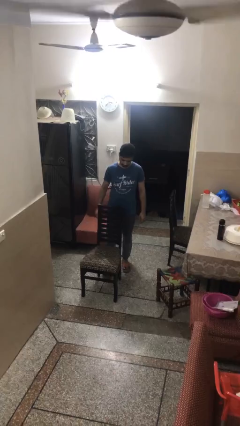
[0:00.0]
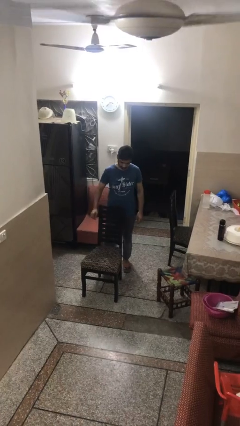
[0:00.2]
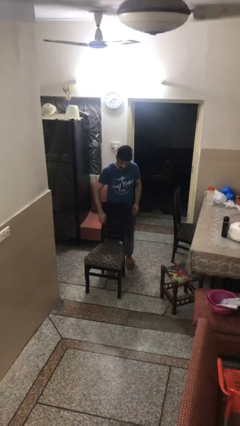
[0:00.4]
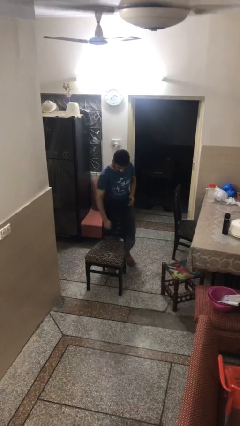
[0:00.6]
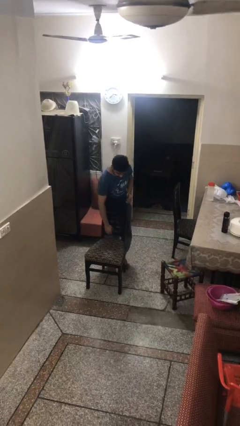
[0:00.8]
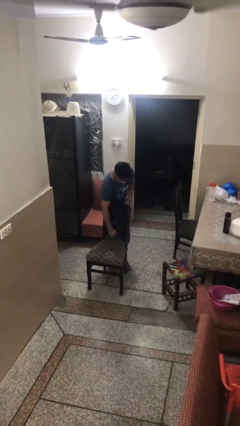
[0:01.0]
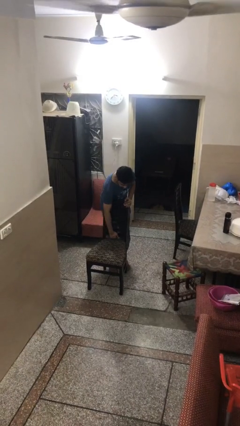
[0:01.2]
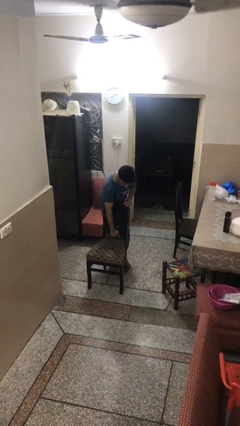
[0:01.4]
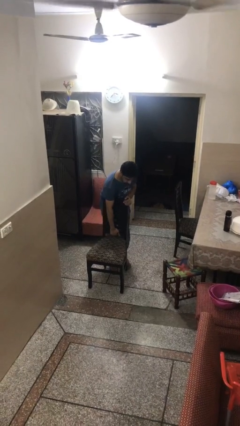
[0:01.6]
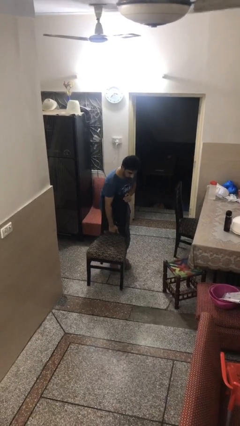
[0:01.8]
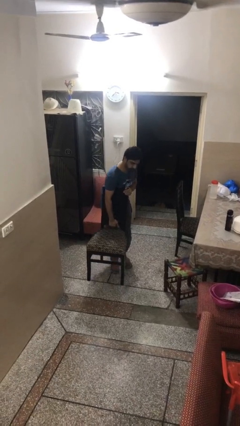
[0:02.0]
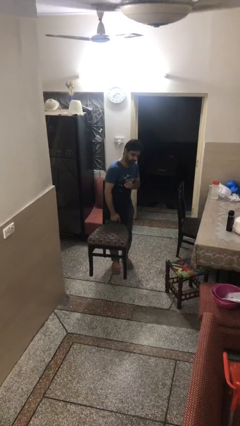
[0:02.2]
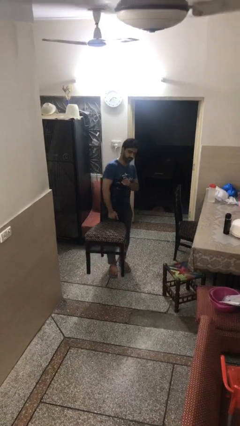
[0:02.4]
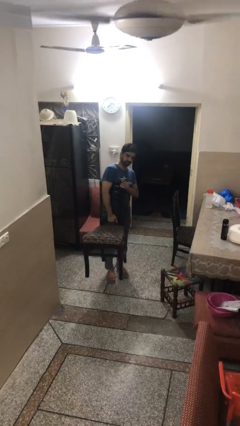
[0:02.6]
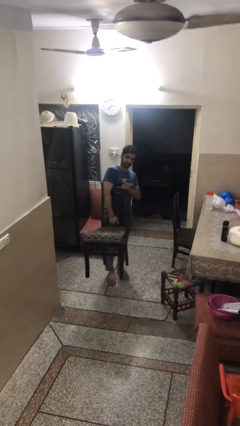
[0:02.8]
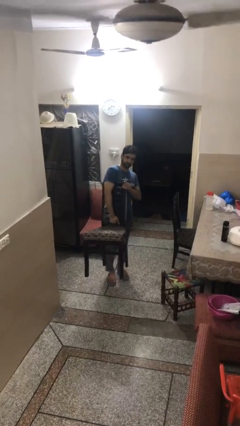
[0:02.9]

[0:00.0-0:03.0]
person picks up object from floor

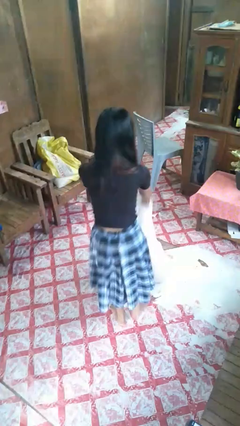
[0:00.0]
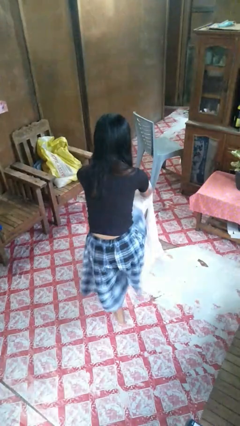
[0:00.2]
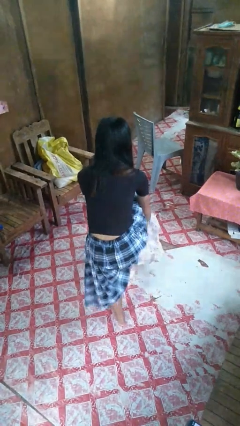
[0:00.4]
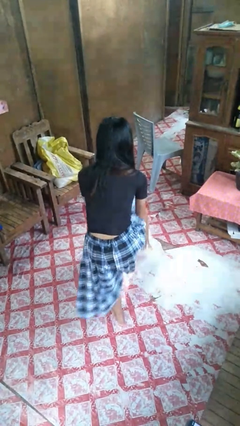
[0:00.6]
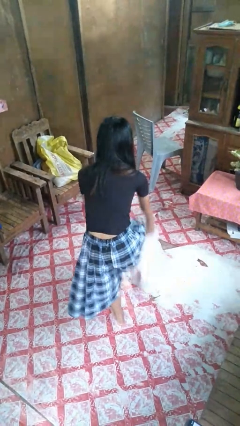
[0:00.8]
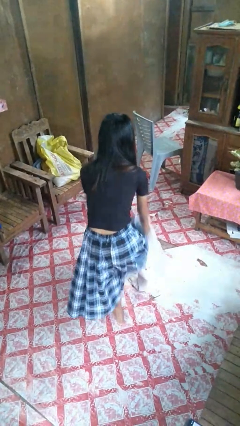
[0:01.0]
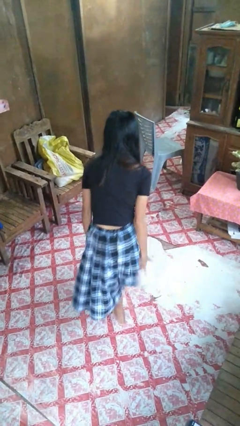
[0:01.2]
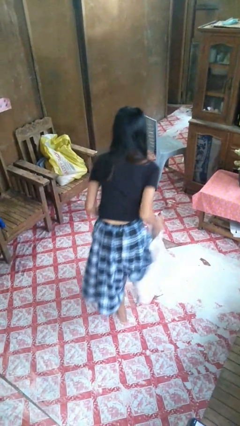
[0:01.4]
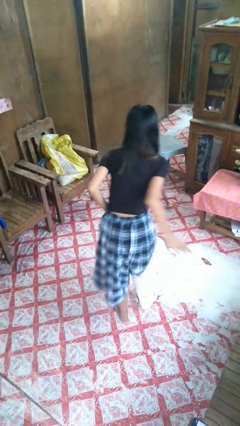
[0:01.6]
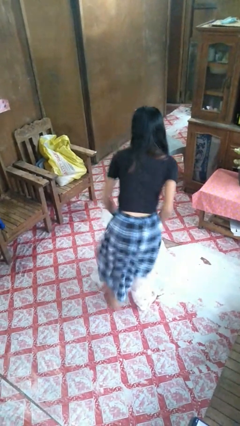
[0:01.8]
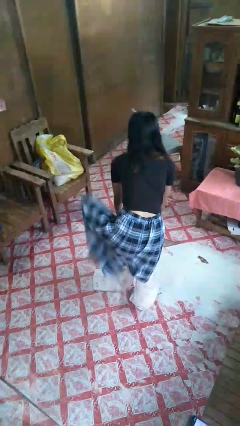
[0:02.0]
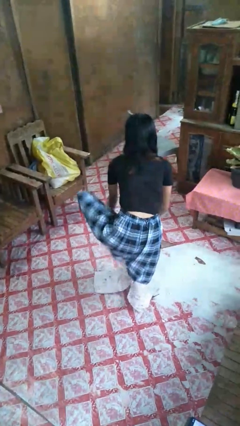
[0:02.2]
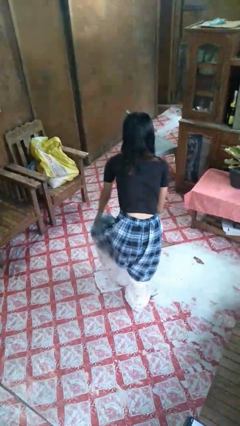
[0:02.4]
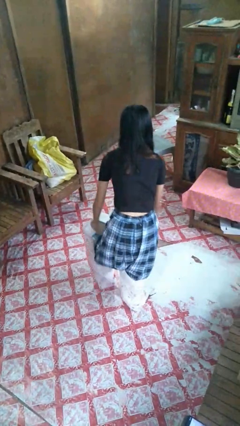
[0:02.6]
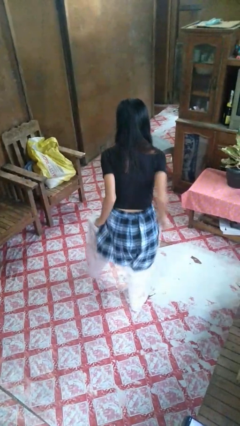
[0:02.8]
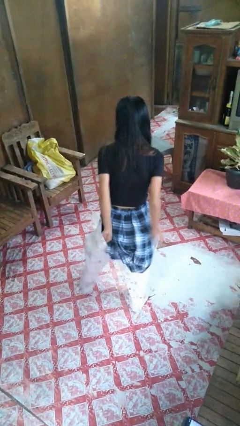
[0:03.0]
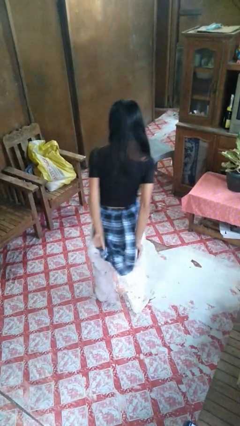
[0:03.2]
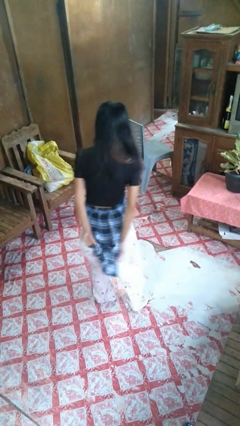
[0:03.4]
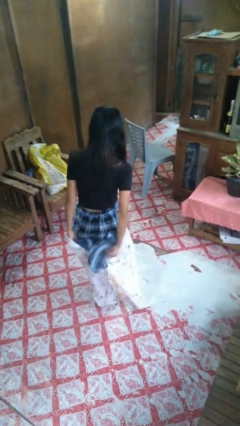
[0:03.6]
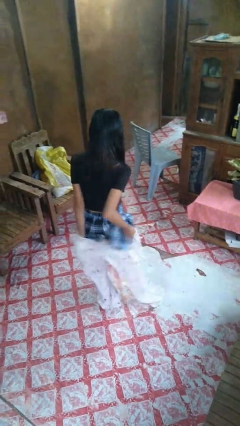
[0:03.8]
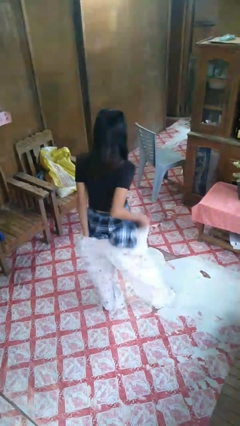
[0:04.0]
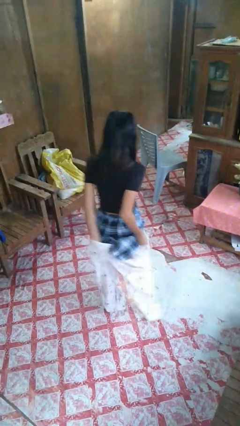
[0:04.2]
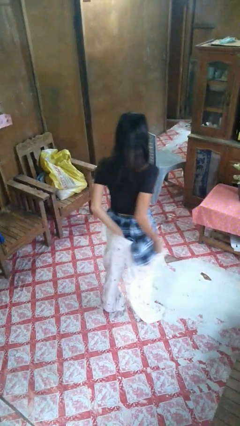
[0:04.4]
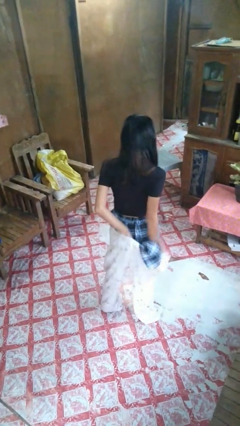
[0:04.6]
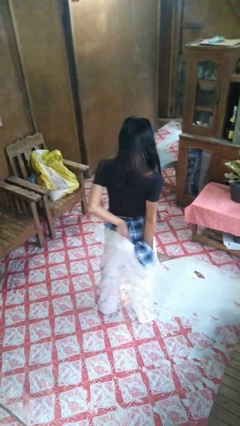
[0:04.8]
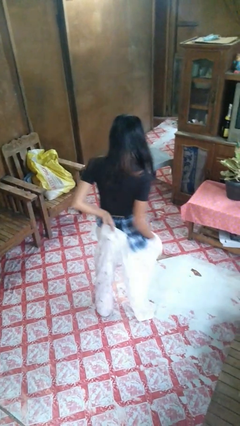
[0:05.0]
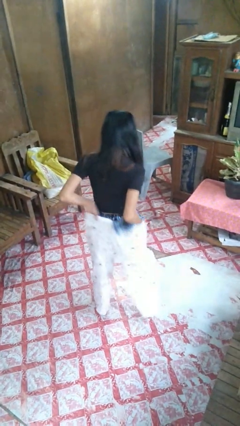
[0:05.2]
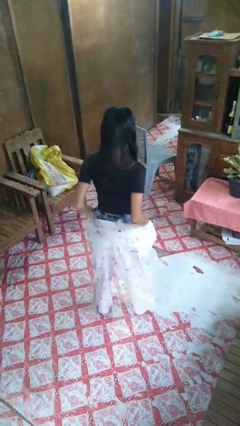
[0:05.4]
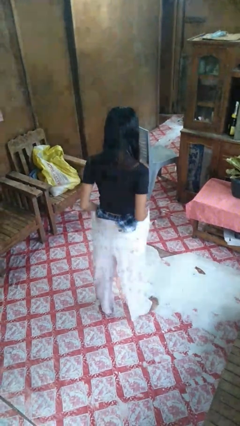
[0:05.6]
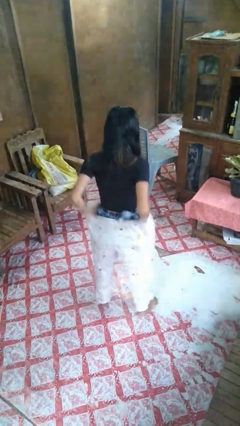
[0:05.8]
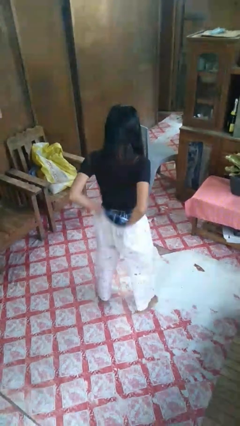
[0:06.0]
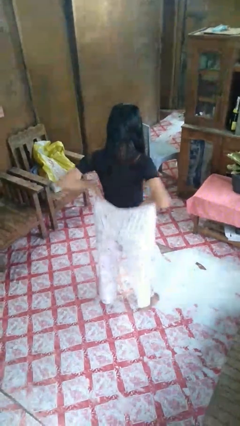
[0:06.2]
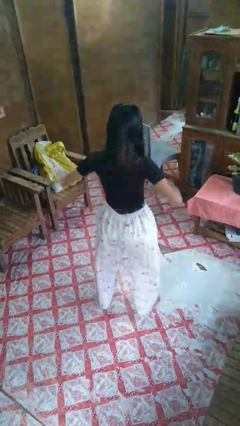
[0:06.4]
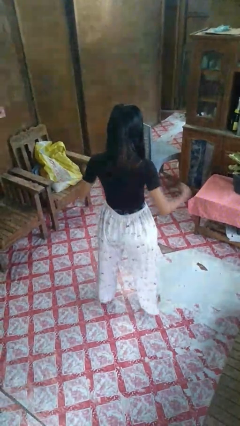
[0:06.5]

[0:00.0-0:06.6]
person puts on pants

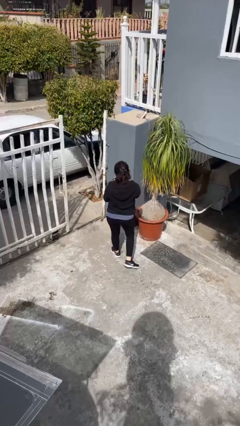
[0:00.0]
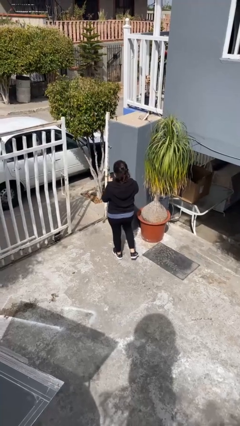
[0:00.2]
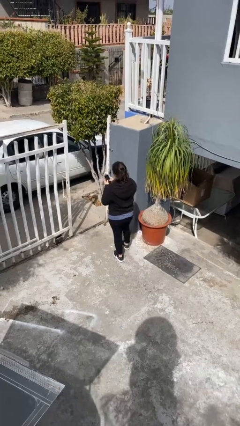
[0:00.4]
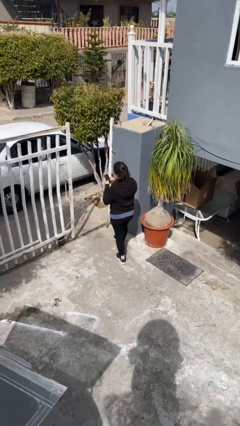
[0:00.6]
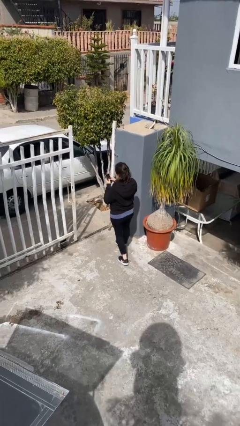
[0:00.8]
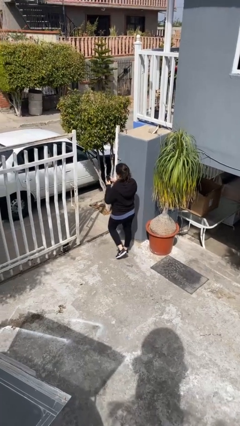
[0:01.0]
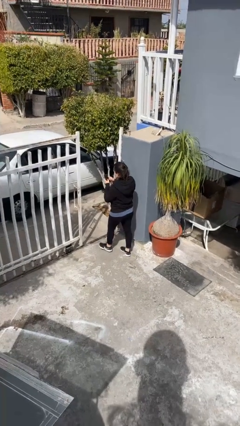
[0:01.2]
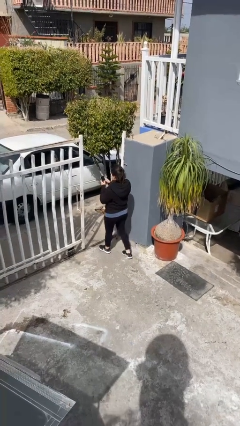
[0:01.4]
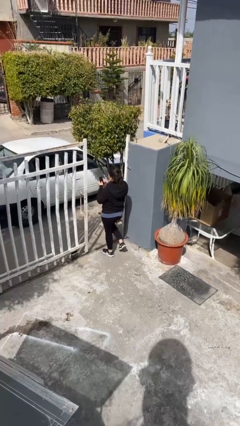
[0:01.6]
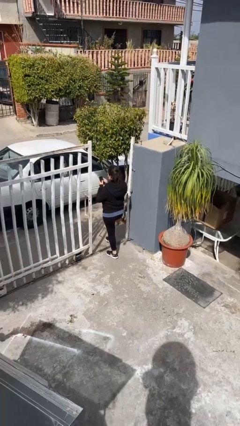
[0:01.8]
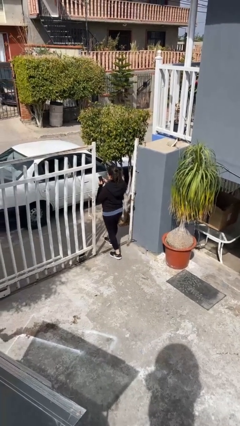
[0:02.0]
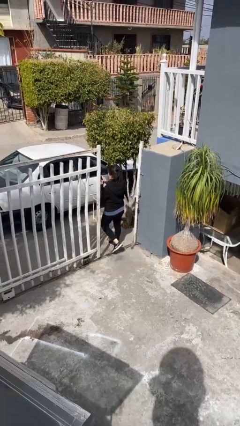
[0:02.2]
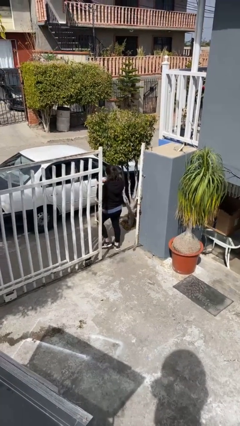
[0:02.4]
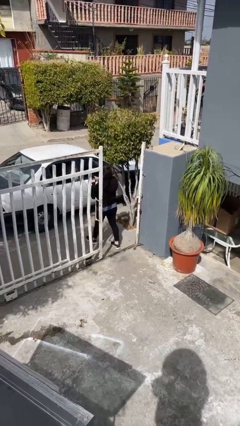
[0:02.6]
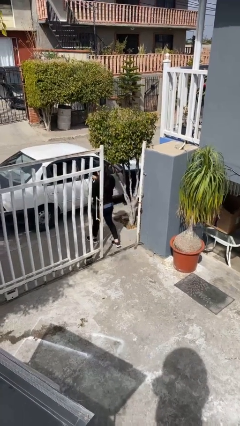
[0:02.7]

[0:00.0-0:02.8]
person exits scene through structure

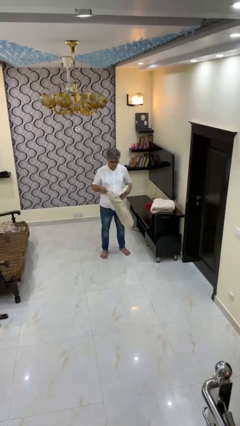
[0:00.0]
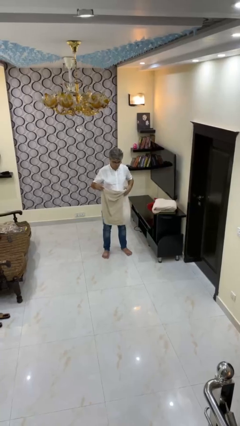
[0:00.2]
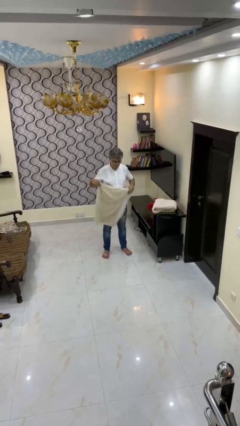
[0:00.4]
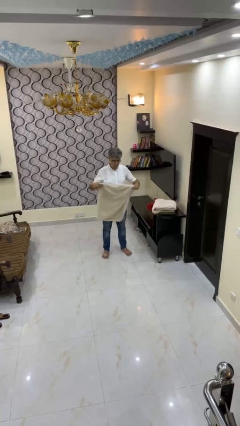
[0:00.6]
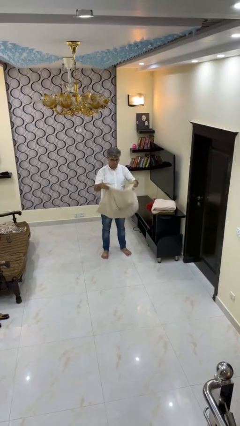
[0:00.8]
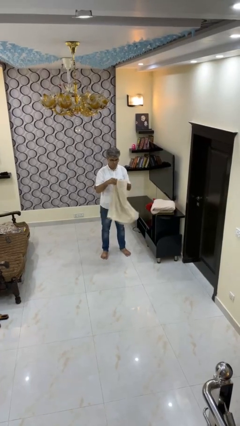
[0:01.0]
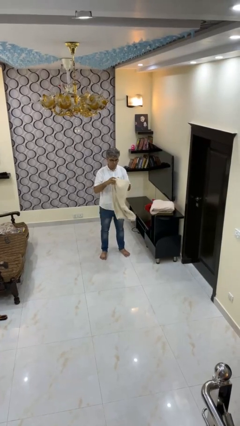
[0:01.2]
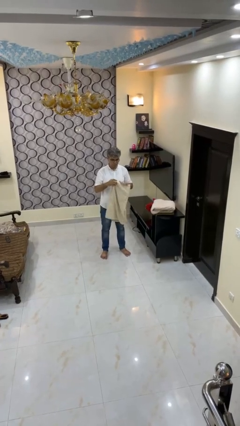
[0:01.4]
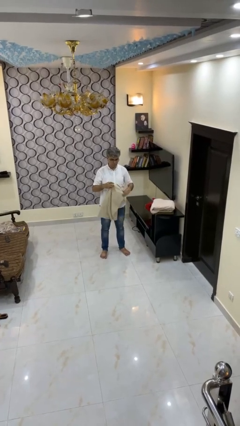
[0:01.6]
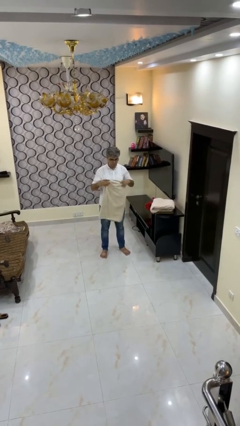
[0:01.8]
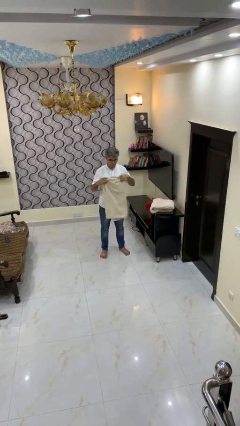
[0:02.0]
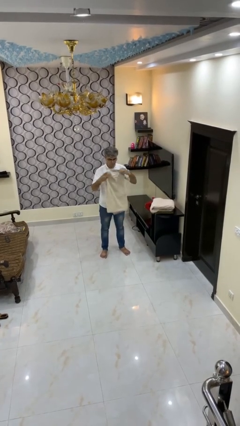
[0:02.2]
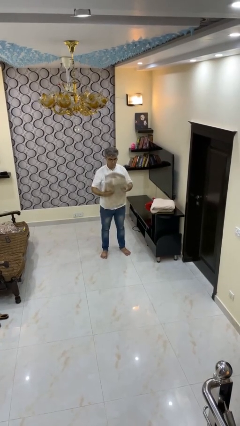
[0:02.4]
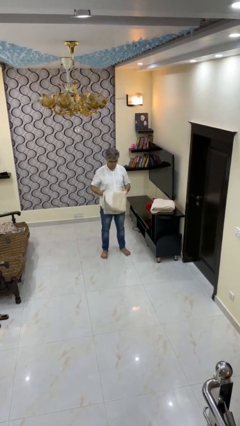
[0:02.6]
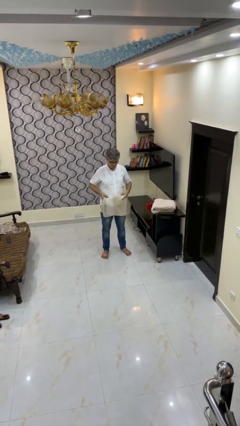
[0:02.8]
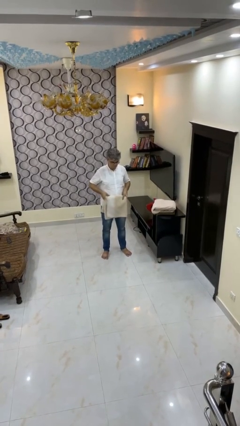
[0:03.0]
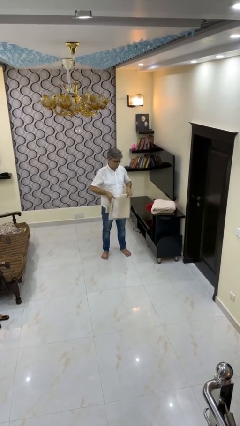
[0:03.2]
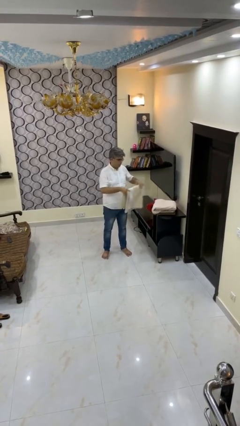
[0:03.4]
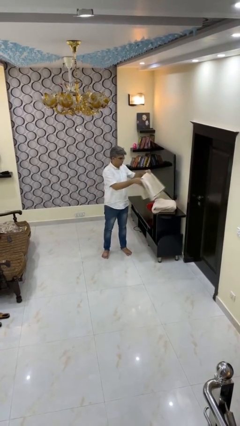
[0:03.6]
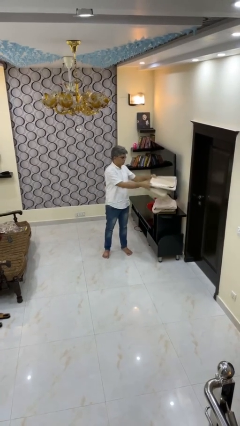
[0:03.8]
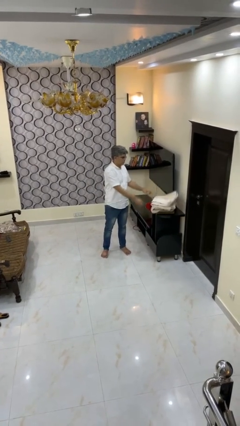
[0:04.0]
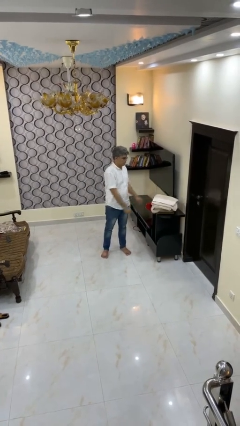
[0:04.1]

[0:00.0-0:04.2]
person folds towel

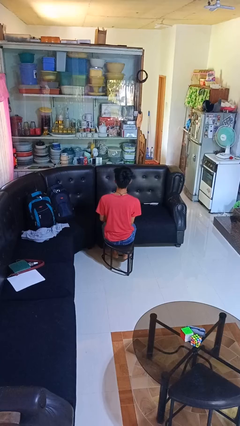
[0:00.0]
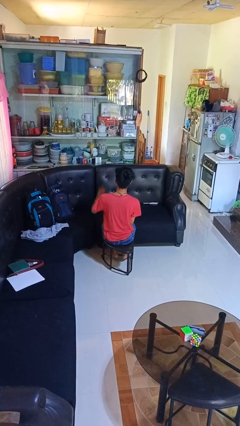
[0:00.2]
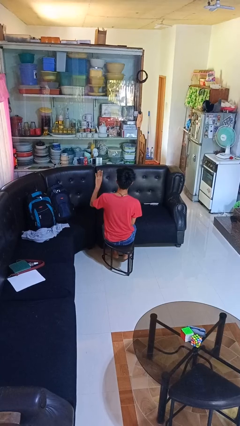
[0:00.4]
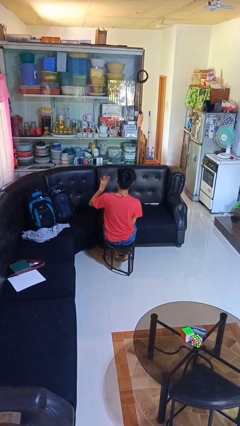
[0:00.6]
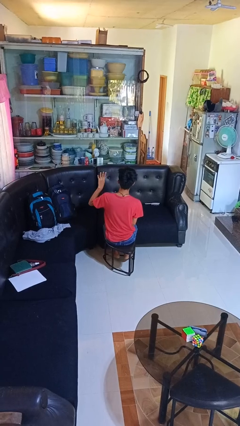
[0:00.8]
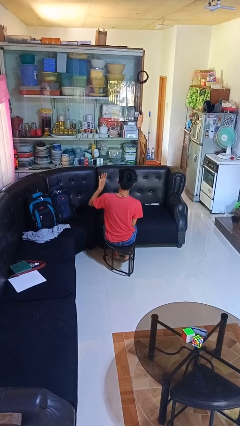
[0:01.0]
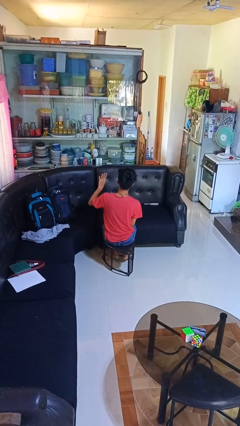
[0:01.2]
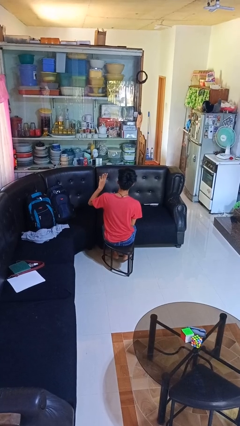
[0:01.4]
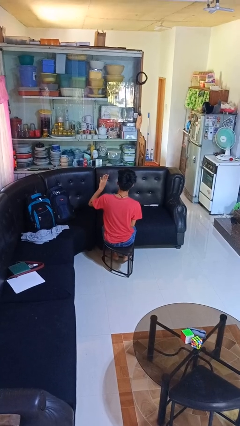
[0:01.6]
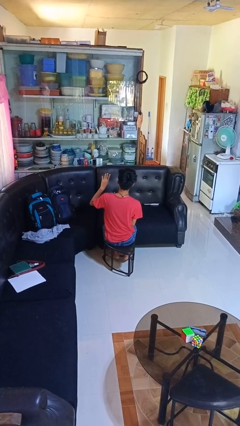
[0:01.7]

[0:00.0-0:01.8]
person gestures number four
